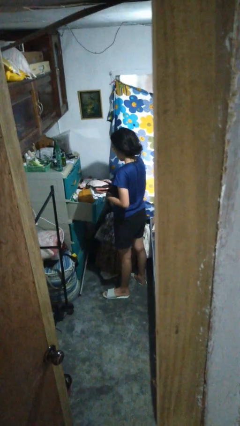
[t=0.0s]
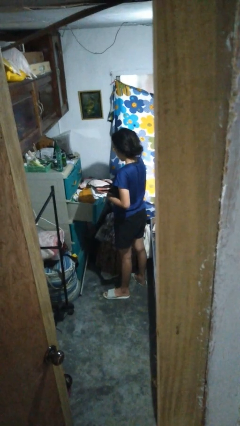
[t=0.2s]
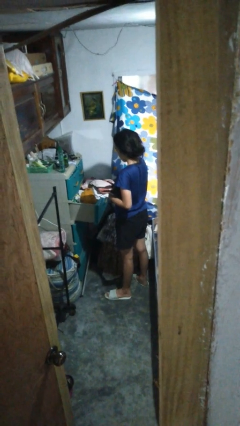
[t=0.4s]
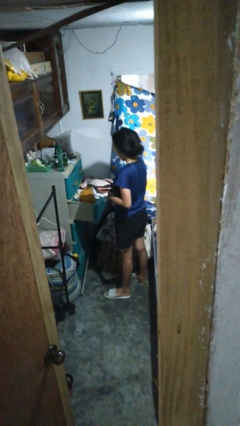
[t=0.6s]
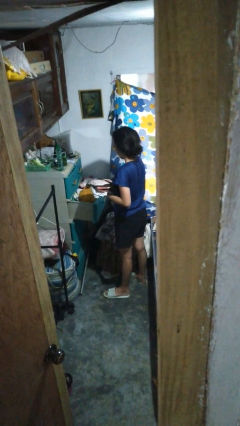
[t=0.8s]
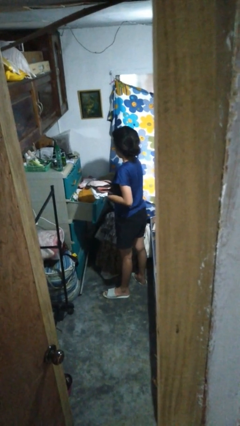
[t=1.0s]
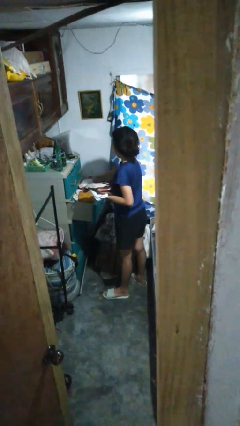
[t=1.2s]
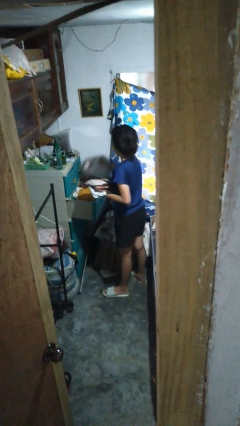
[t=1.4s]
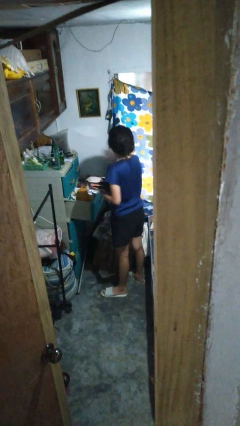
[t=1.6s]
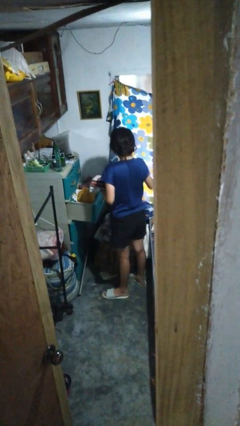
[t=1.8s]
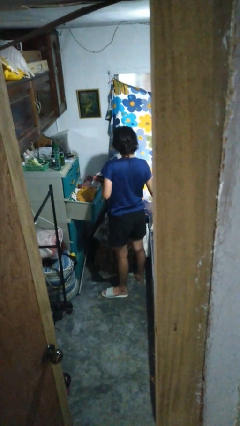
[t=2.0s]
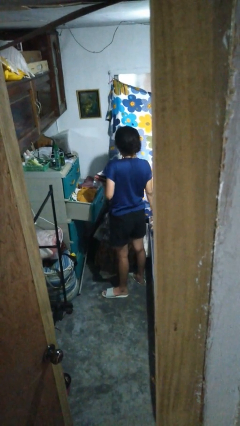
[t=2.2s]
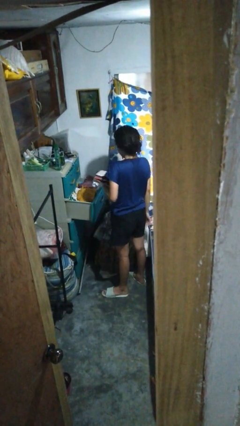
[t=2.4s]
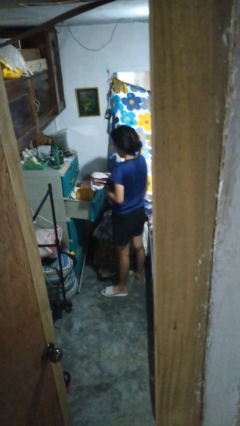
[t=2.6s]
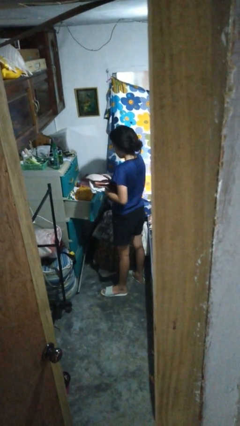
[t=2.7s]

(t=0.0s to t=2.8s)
person takes clothes from dresser

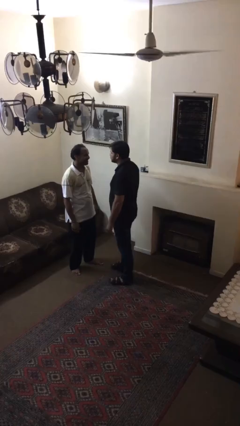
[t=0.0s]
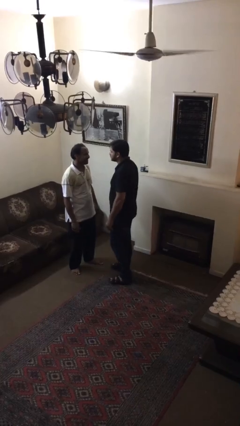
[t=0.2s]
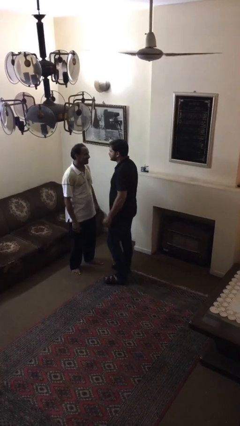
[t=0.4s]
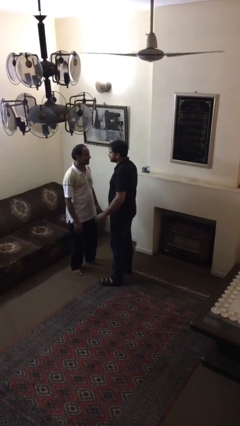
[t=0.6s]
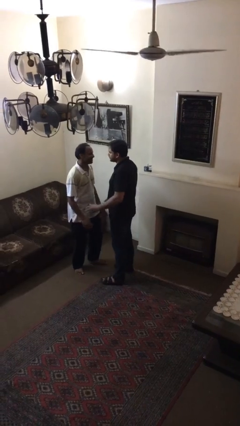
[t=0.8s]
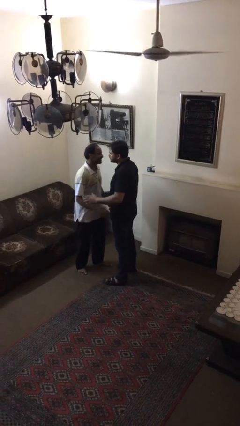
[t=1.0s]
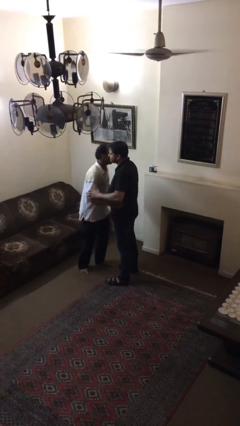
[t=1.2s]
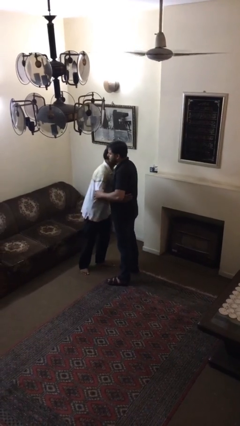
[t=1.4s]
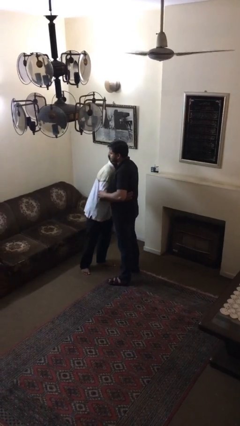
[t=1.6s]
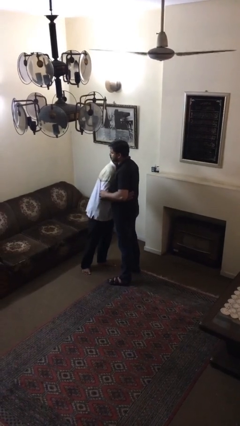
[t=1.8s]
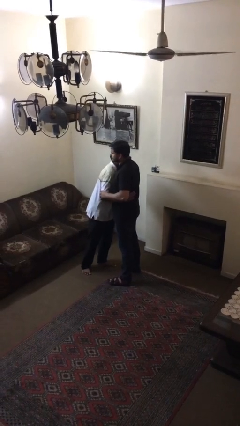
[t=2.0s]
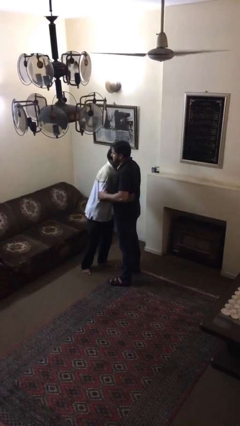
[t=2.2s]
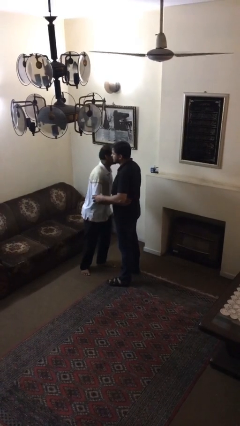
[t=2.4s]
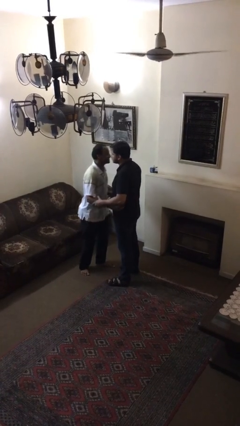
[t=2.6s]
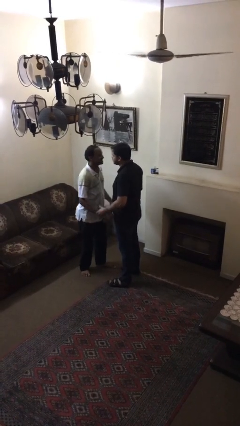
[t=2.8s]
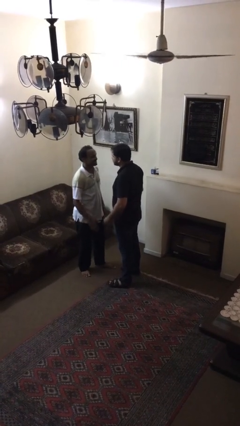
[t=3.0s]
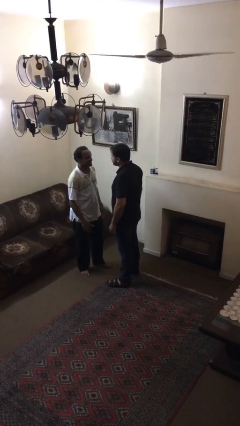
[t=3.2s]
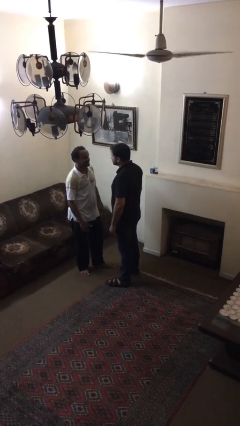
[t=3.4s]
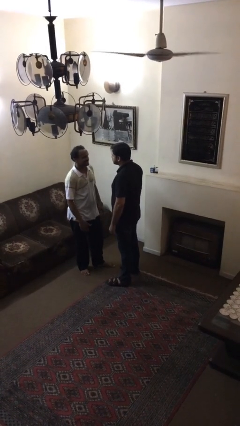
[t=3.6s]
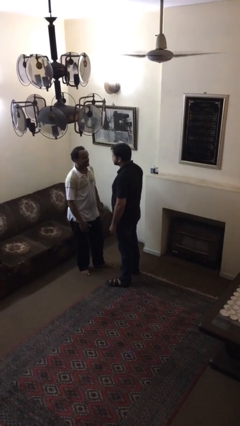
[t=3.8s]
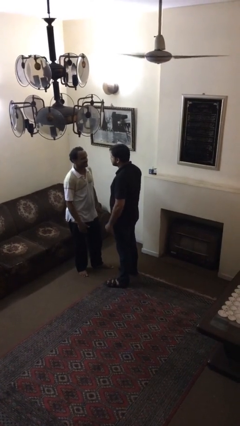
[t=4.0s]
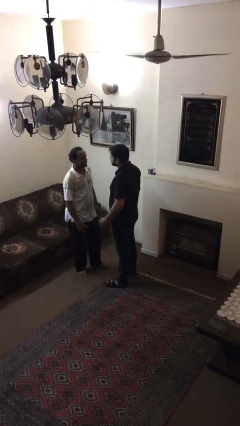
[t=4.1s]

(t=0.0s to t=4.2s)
person embraces person

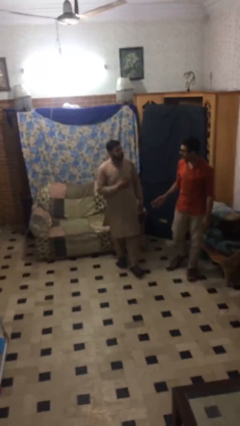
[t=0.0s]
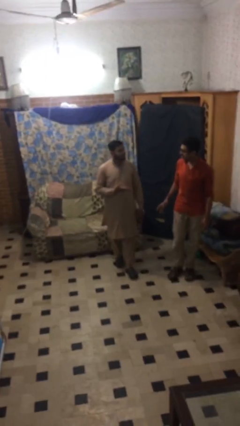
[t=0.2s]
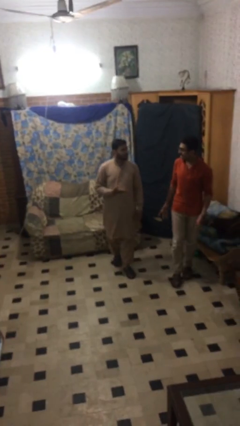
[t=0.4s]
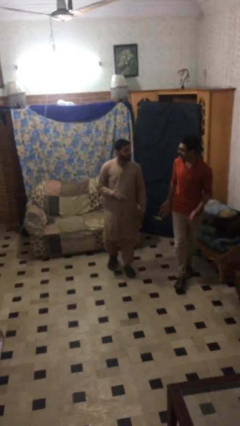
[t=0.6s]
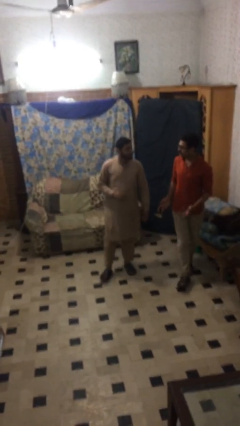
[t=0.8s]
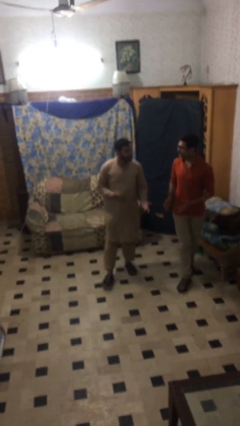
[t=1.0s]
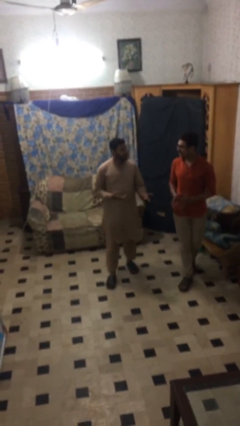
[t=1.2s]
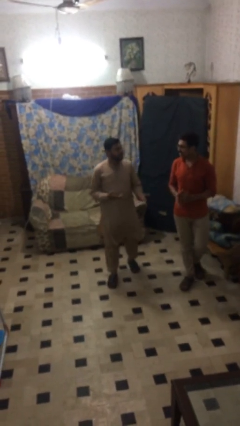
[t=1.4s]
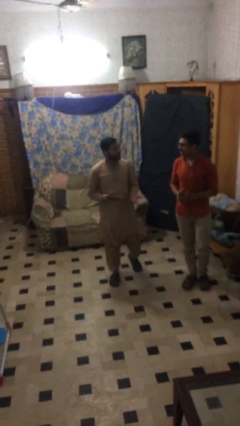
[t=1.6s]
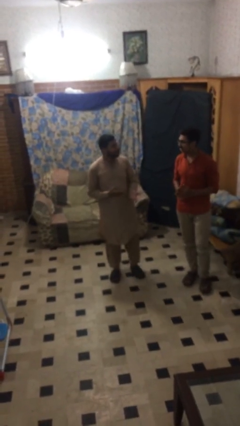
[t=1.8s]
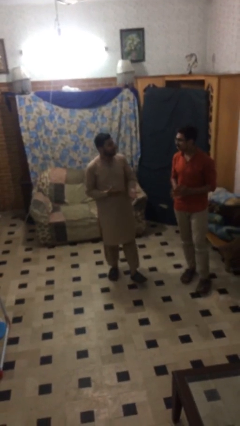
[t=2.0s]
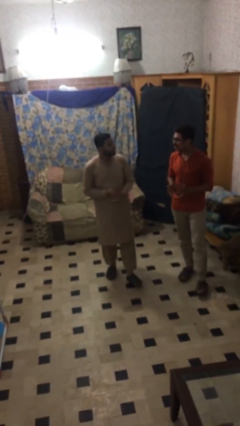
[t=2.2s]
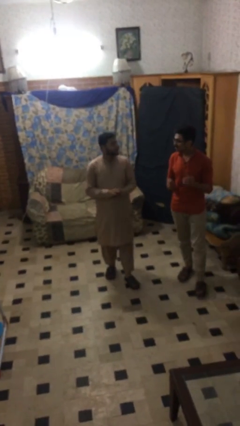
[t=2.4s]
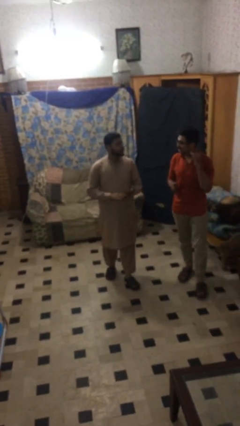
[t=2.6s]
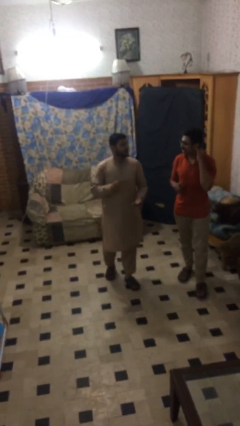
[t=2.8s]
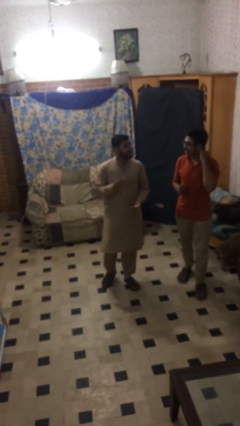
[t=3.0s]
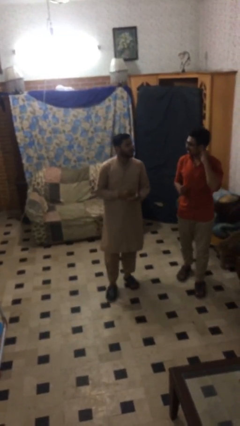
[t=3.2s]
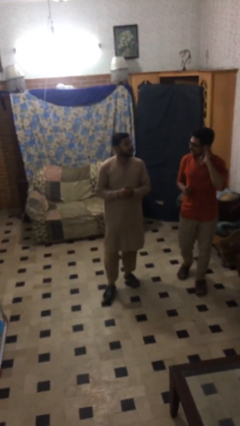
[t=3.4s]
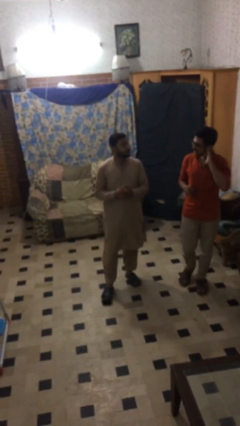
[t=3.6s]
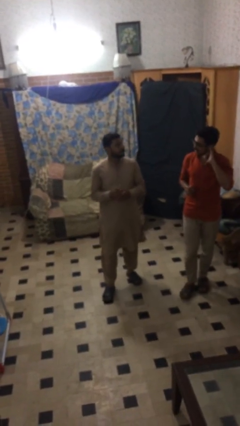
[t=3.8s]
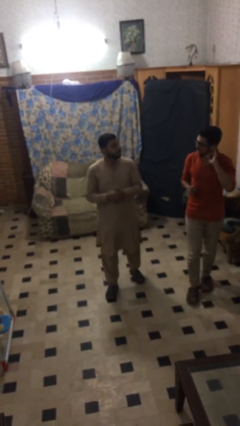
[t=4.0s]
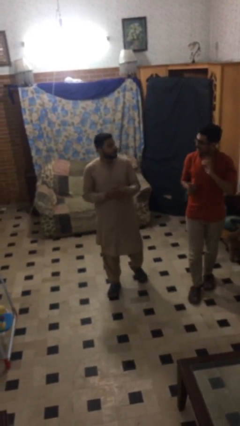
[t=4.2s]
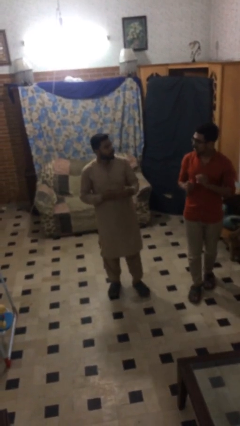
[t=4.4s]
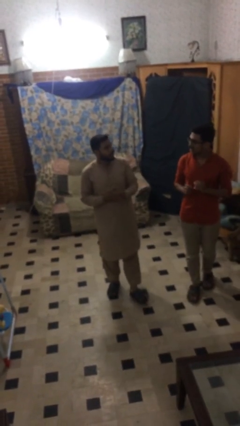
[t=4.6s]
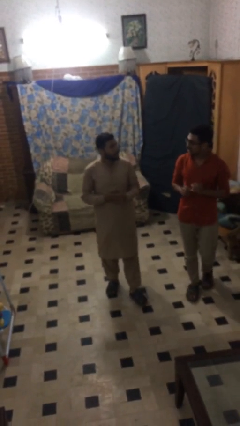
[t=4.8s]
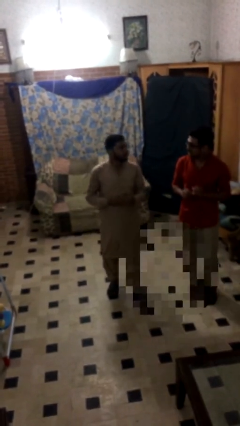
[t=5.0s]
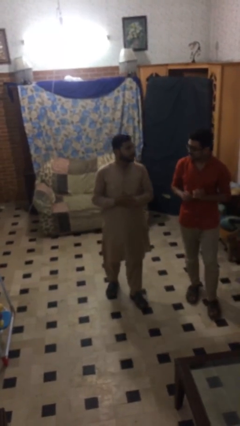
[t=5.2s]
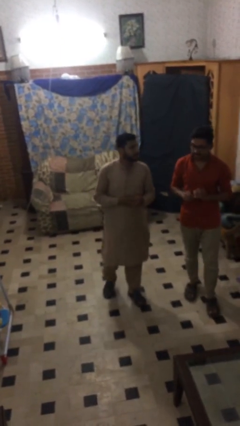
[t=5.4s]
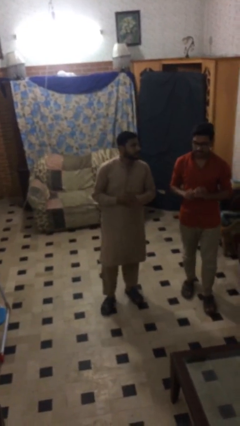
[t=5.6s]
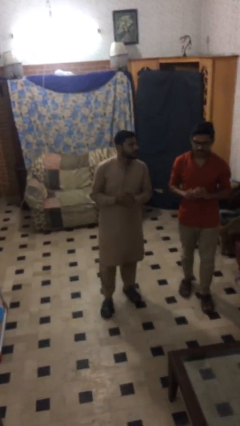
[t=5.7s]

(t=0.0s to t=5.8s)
person talks to person

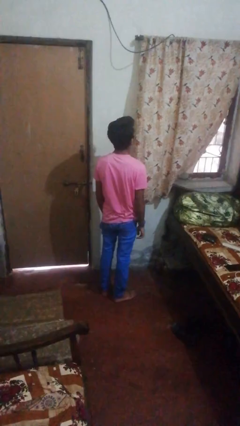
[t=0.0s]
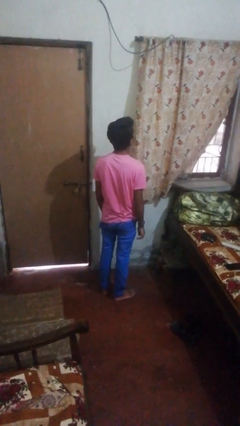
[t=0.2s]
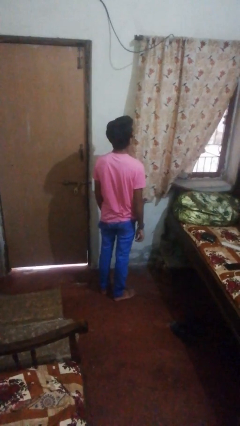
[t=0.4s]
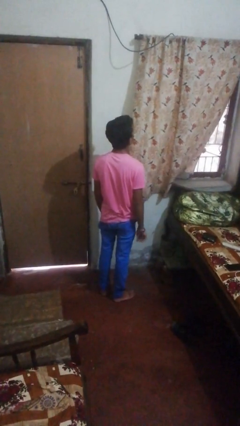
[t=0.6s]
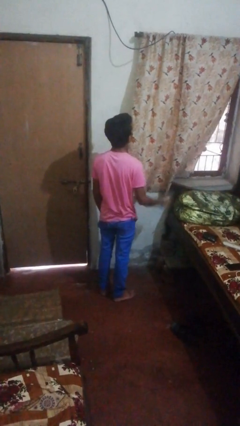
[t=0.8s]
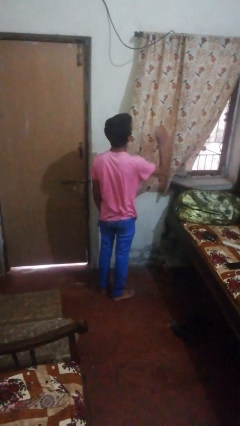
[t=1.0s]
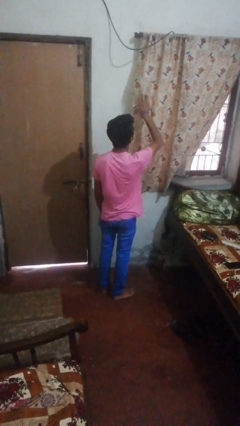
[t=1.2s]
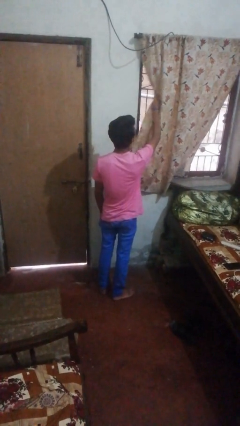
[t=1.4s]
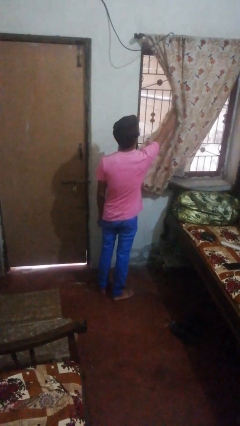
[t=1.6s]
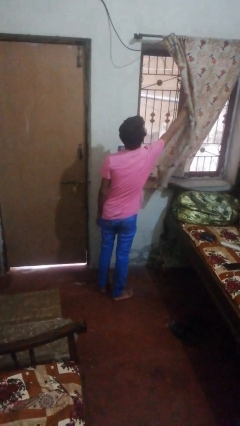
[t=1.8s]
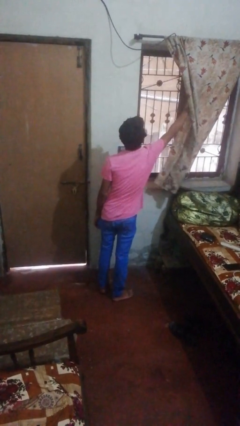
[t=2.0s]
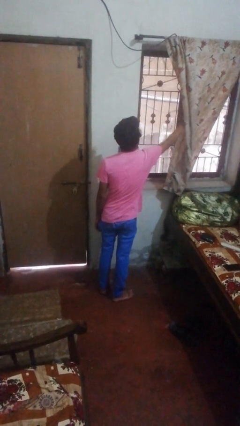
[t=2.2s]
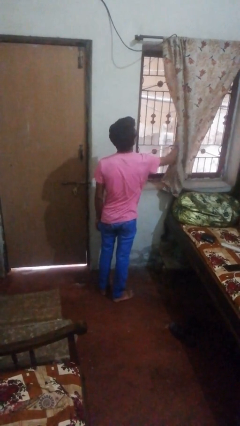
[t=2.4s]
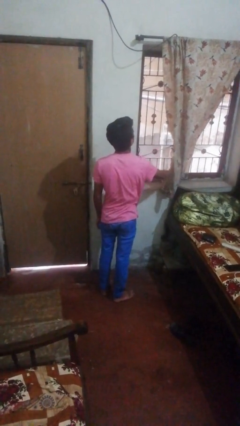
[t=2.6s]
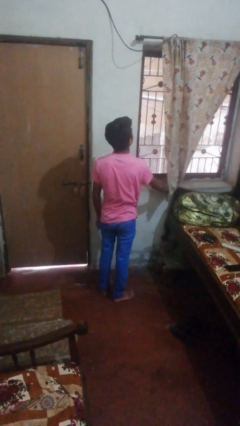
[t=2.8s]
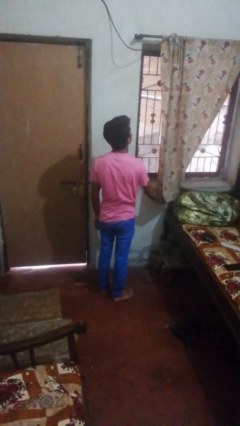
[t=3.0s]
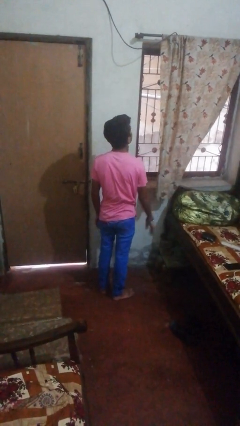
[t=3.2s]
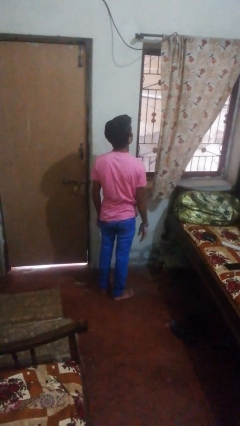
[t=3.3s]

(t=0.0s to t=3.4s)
person opens curtains

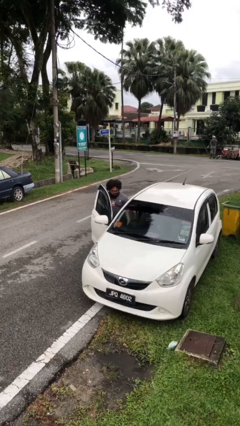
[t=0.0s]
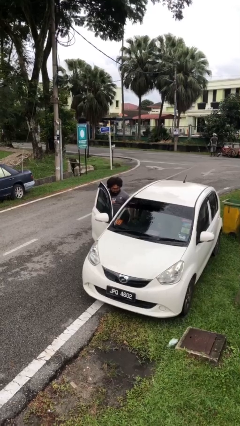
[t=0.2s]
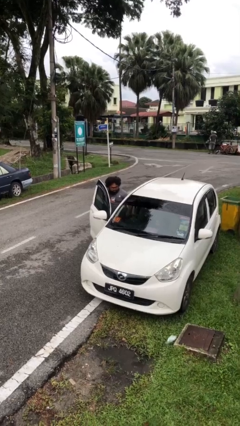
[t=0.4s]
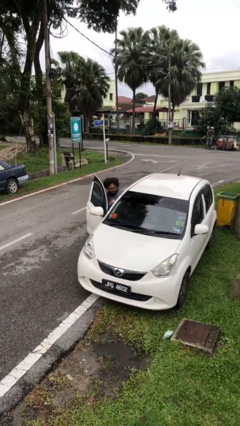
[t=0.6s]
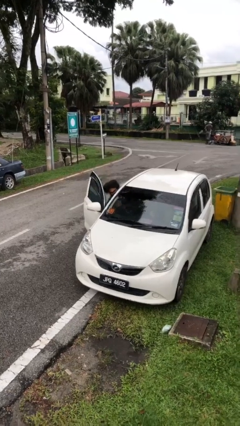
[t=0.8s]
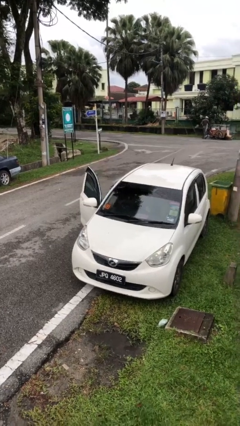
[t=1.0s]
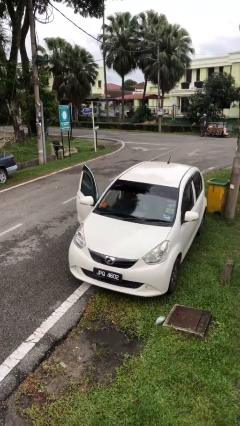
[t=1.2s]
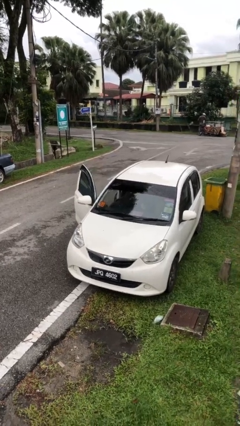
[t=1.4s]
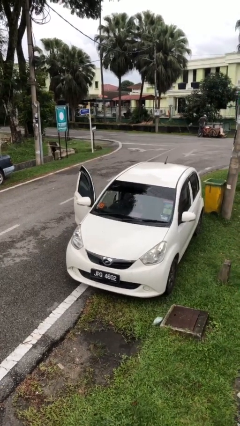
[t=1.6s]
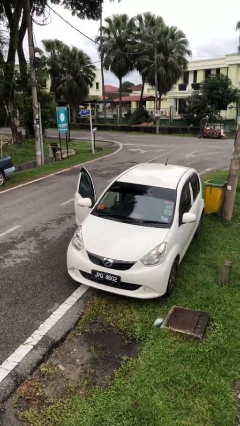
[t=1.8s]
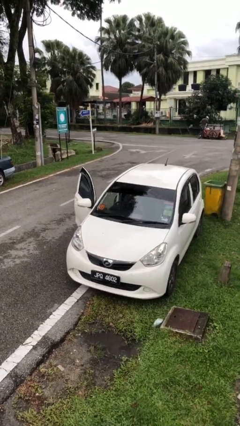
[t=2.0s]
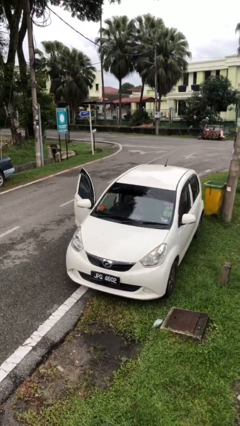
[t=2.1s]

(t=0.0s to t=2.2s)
person enters car
